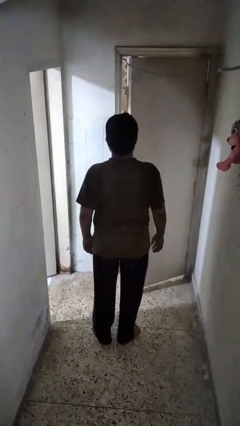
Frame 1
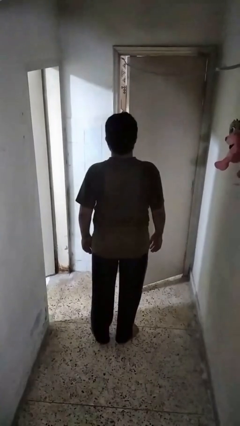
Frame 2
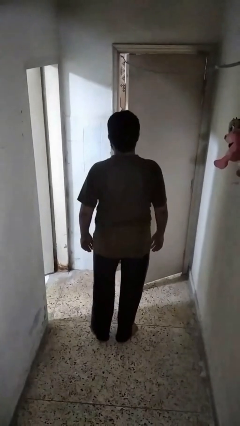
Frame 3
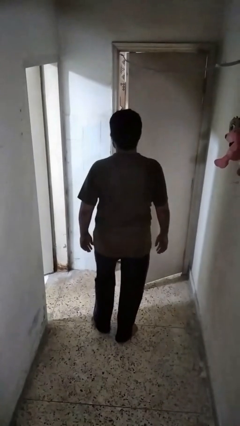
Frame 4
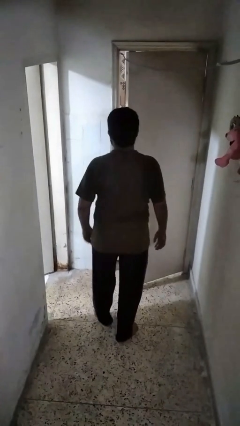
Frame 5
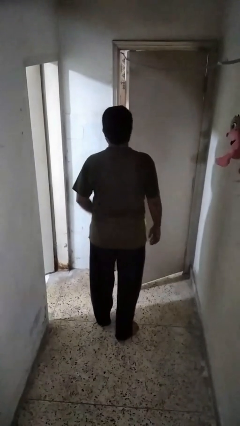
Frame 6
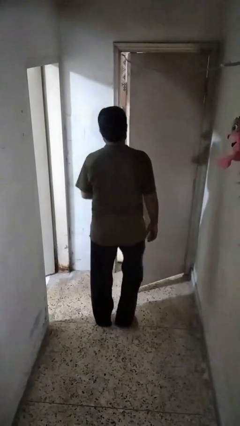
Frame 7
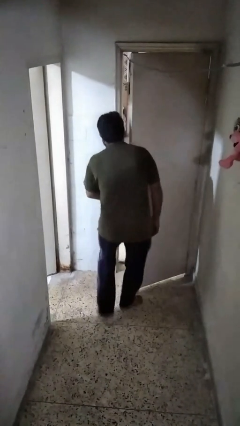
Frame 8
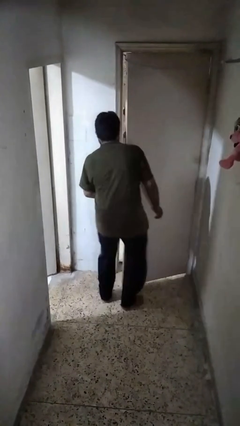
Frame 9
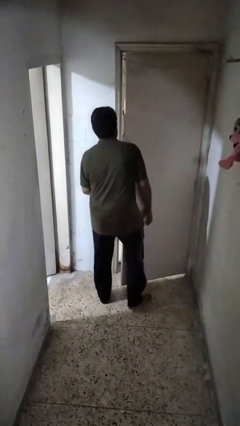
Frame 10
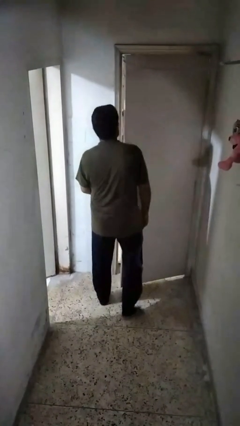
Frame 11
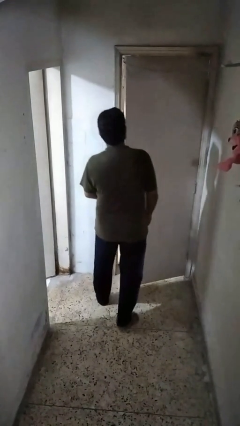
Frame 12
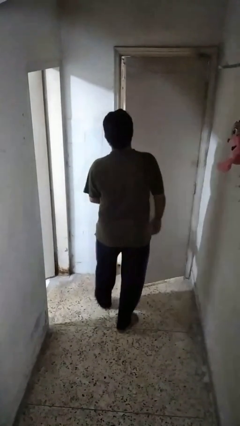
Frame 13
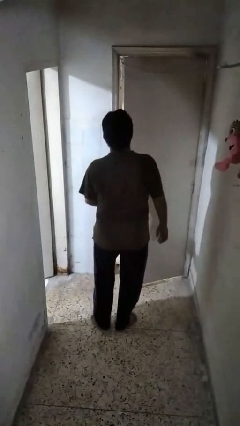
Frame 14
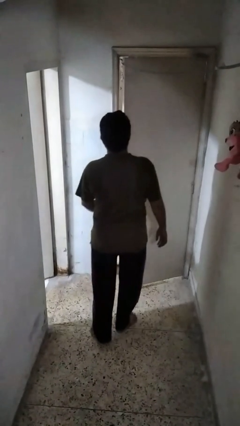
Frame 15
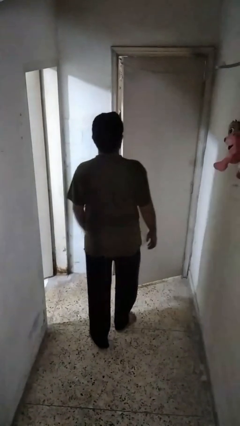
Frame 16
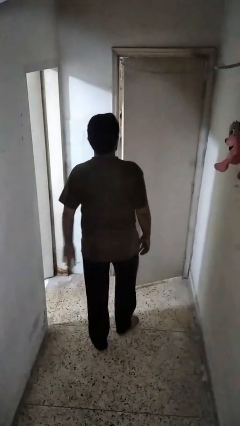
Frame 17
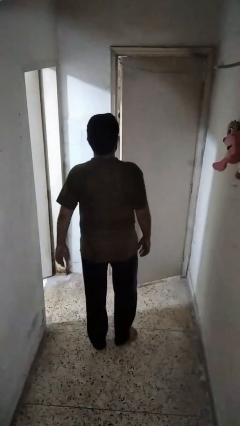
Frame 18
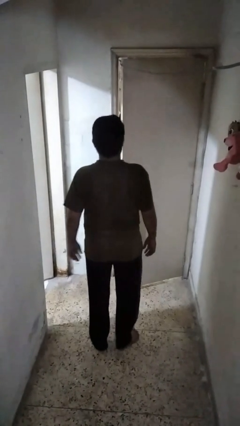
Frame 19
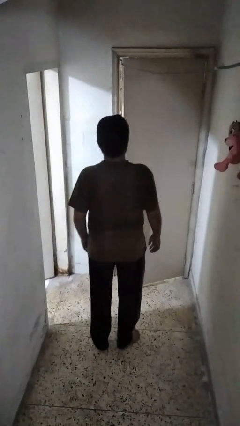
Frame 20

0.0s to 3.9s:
person bumps into wall

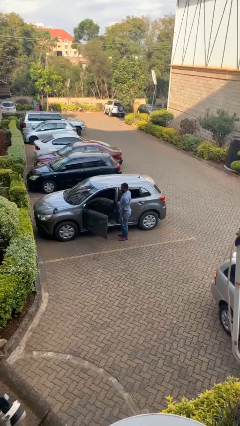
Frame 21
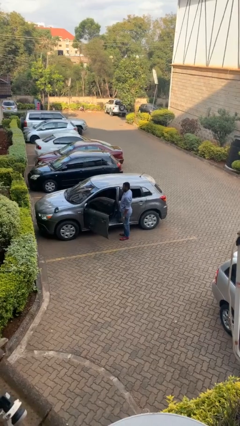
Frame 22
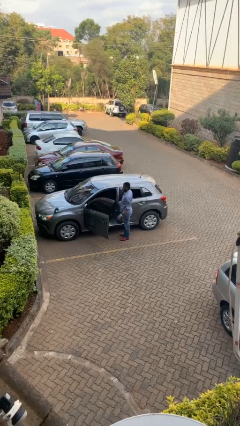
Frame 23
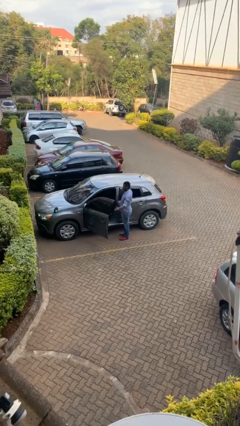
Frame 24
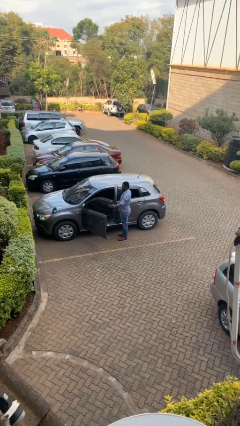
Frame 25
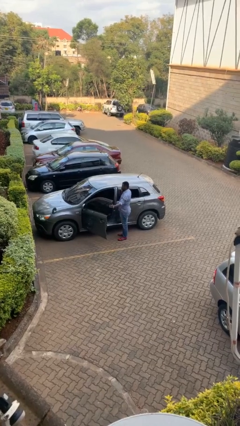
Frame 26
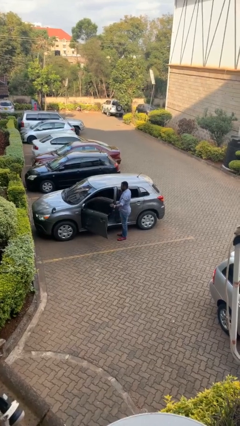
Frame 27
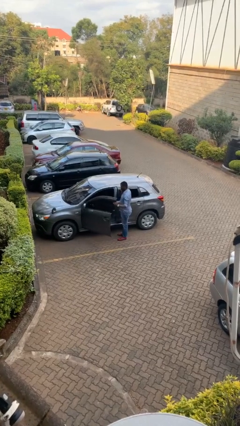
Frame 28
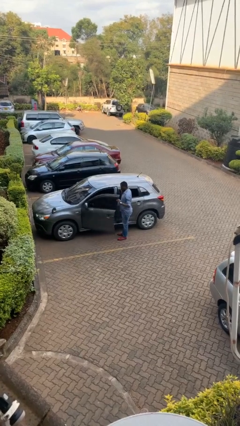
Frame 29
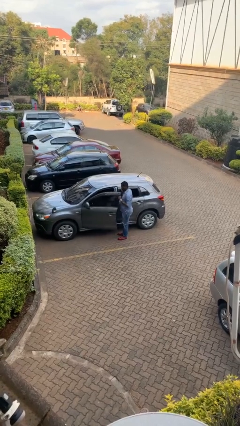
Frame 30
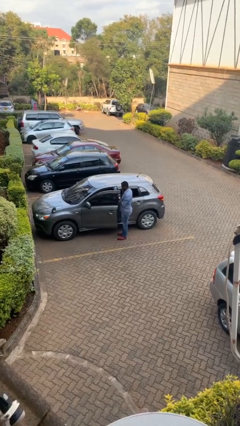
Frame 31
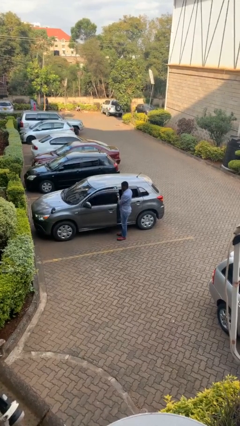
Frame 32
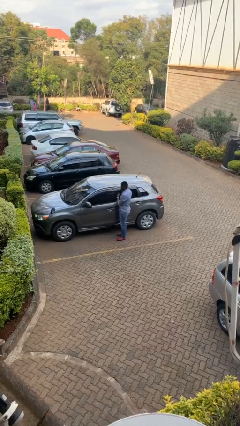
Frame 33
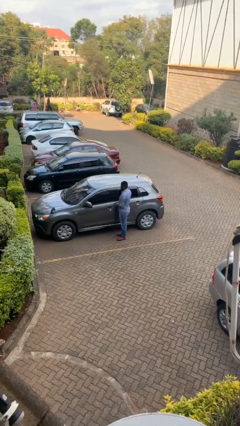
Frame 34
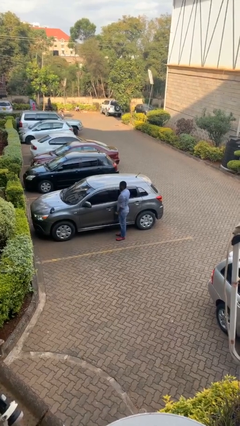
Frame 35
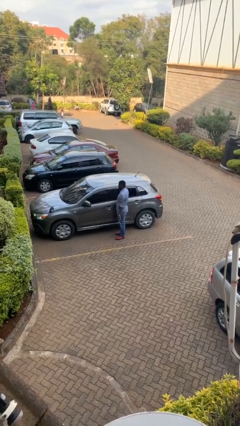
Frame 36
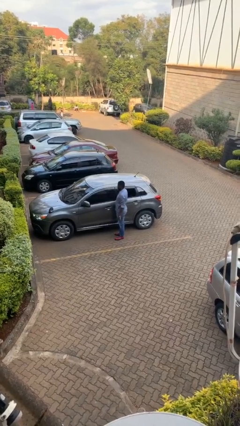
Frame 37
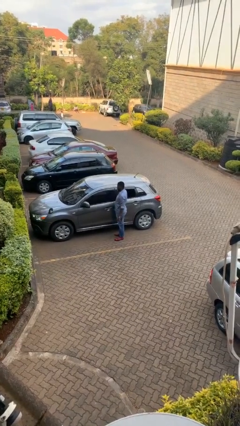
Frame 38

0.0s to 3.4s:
person closes car door

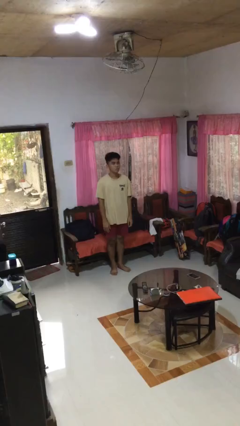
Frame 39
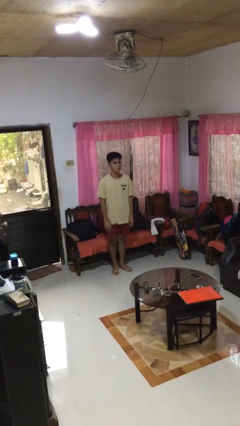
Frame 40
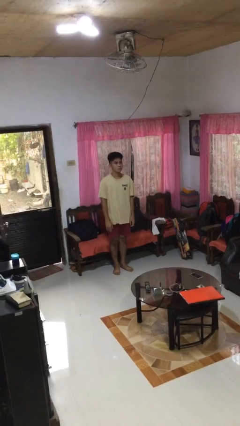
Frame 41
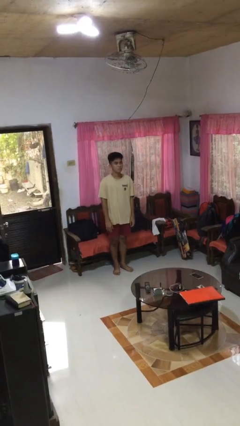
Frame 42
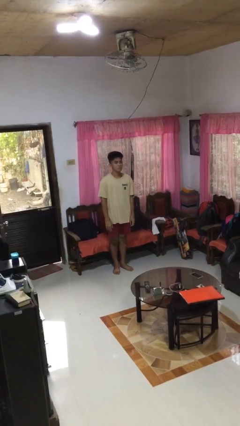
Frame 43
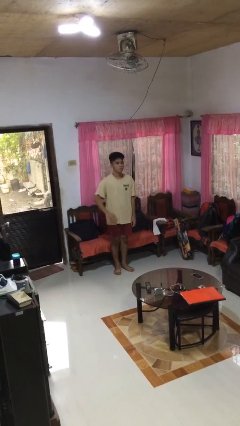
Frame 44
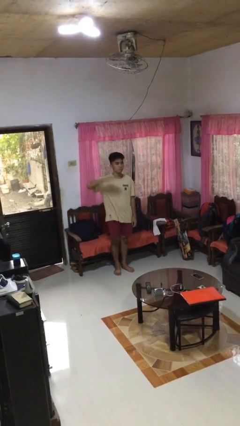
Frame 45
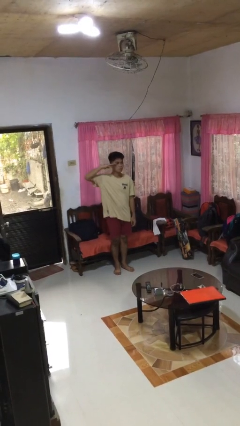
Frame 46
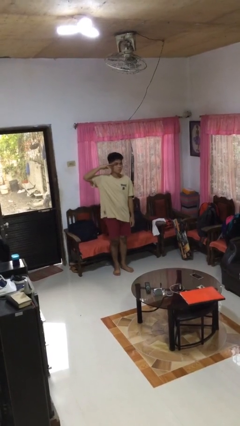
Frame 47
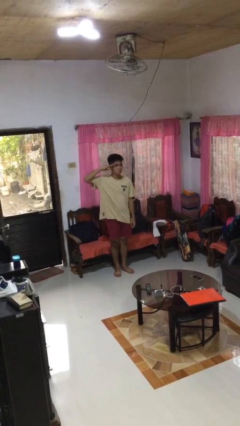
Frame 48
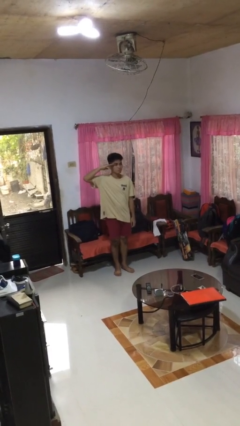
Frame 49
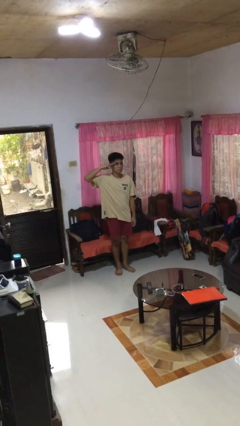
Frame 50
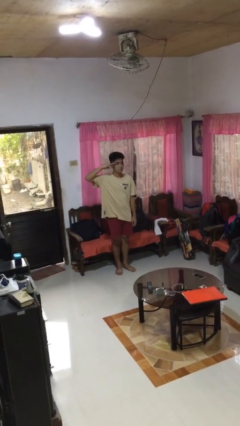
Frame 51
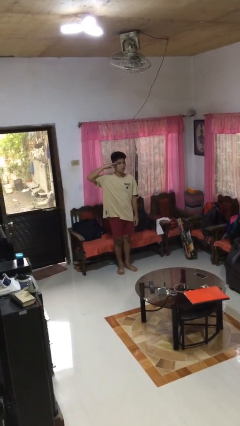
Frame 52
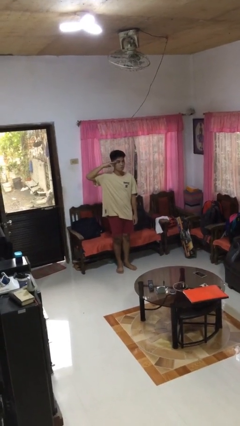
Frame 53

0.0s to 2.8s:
person salutes

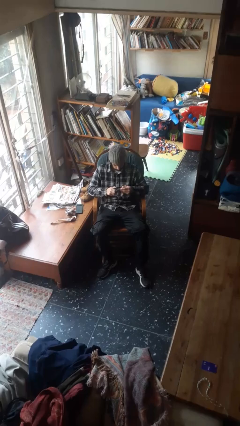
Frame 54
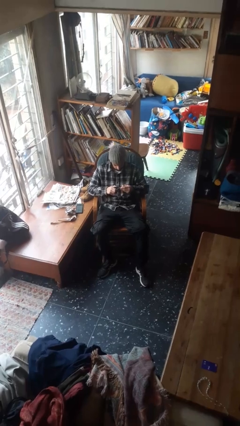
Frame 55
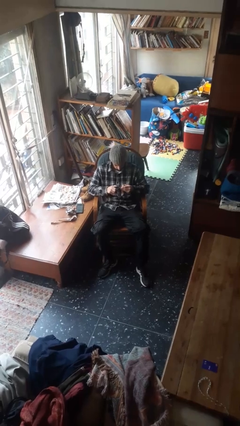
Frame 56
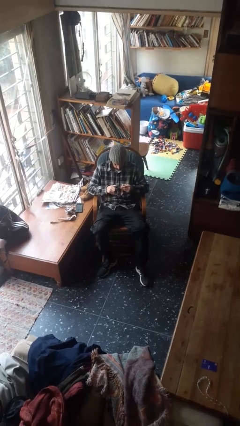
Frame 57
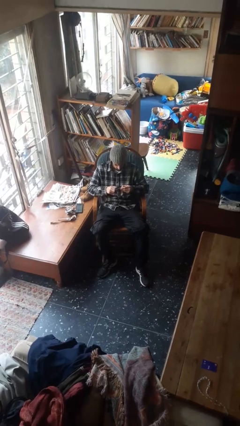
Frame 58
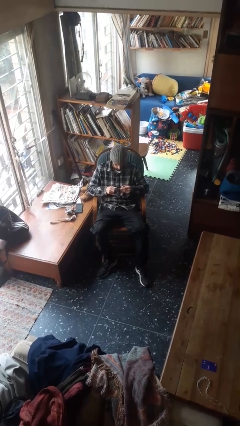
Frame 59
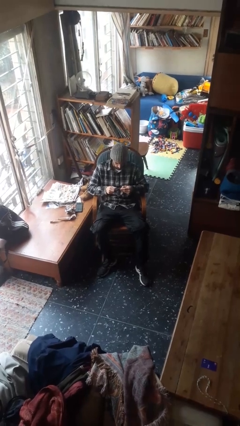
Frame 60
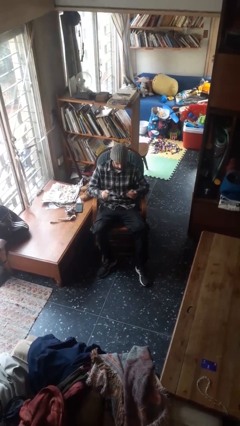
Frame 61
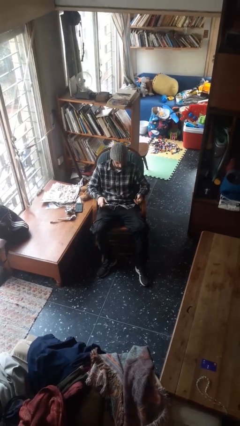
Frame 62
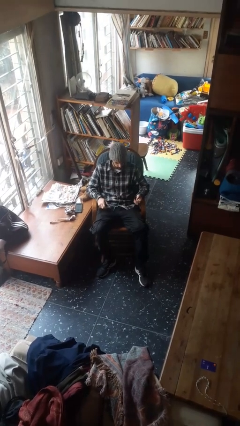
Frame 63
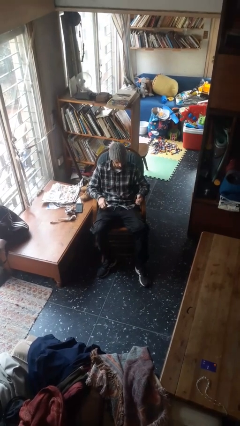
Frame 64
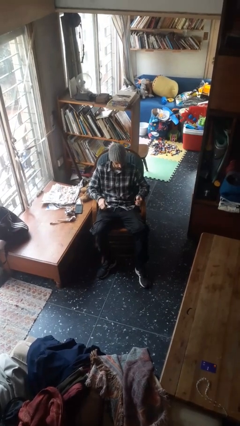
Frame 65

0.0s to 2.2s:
person clips fingernails

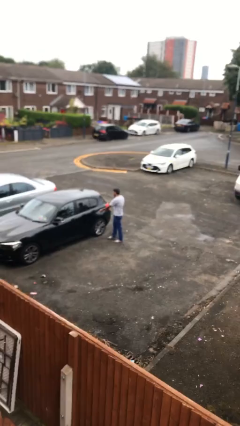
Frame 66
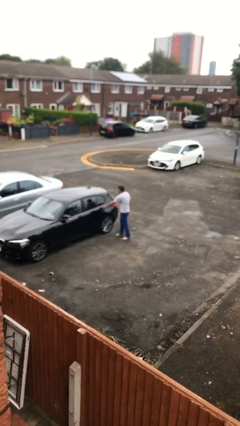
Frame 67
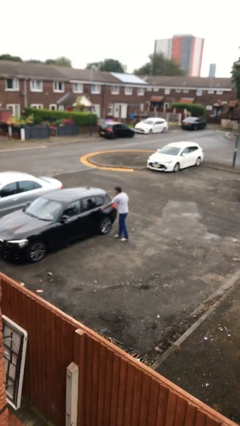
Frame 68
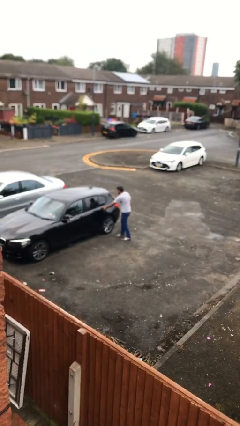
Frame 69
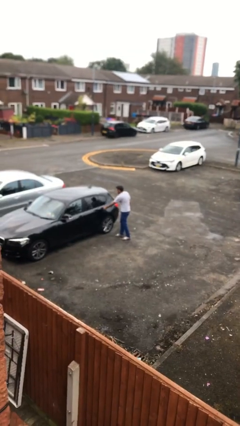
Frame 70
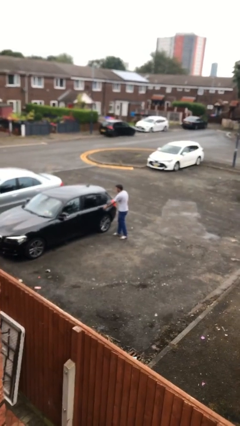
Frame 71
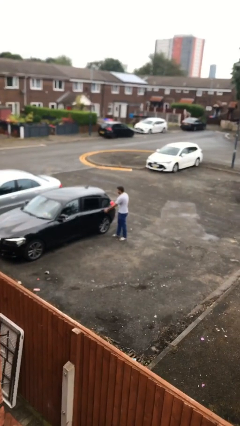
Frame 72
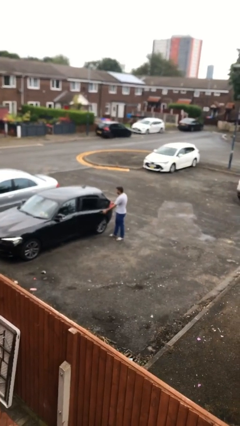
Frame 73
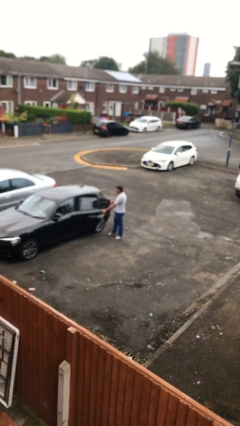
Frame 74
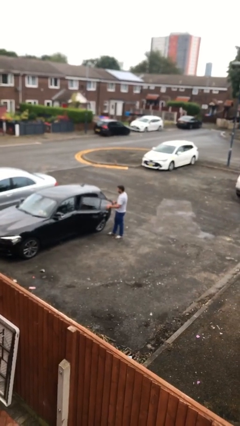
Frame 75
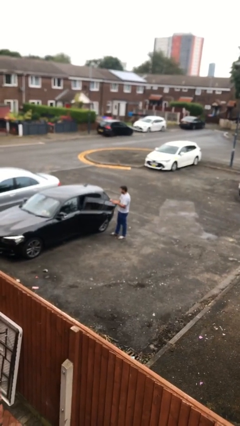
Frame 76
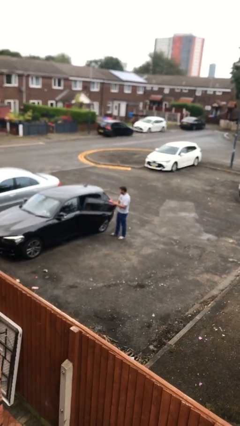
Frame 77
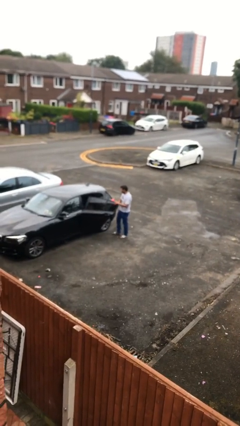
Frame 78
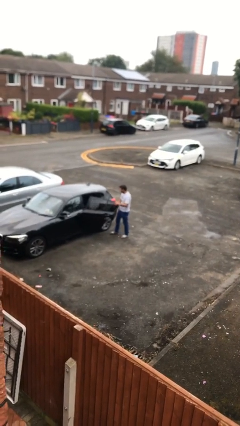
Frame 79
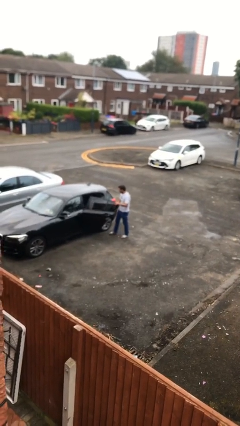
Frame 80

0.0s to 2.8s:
person opens car door

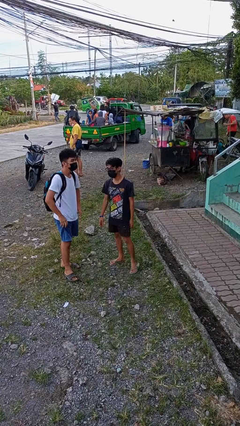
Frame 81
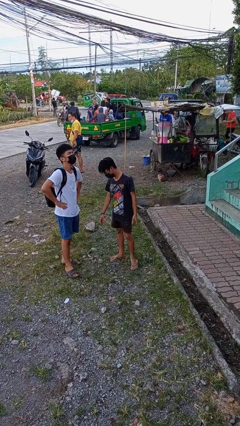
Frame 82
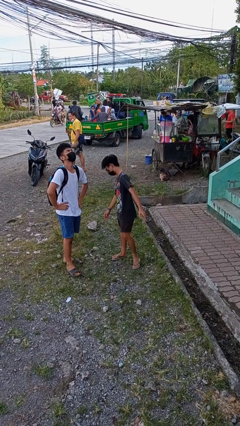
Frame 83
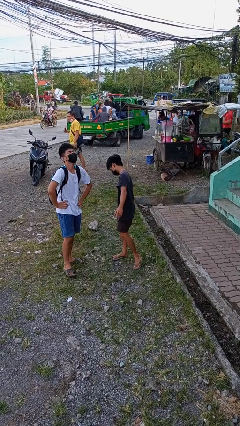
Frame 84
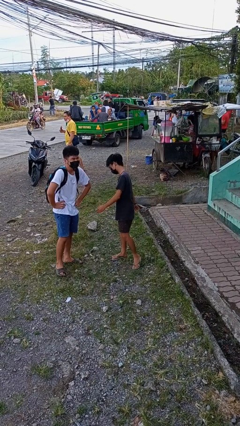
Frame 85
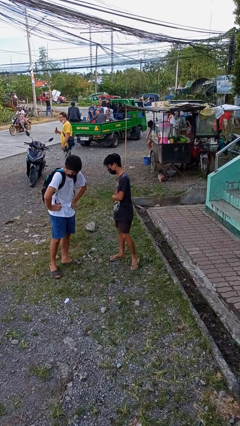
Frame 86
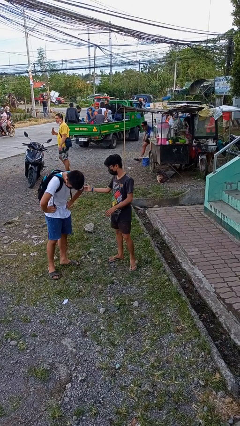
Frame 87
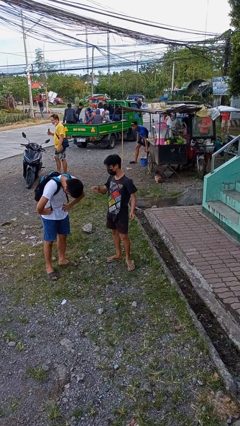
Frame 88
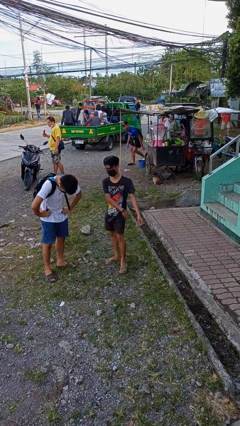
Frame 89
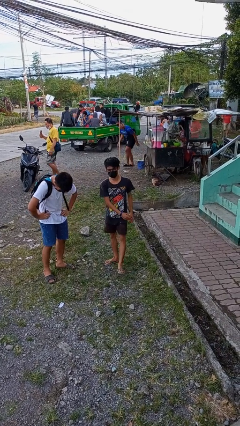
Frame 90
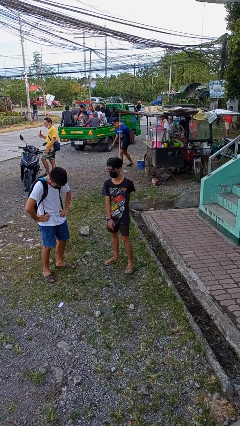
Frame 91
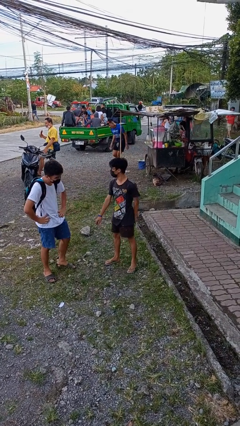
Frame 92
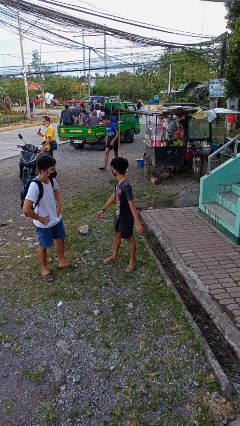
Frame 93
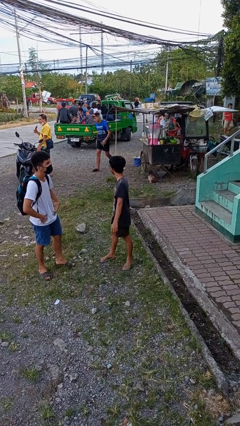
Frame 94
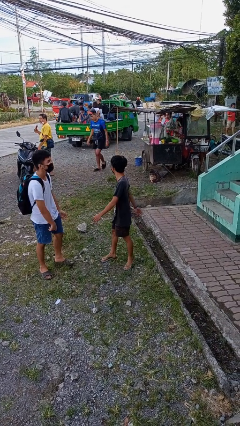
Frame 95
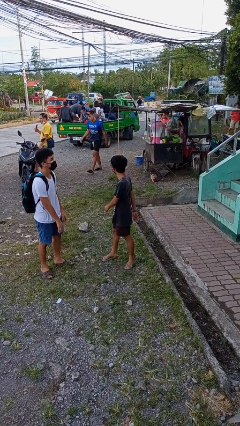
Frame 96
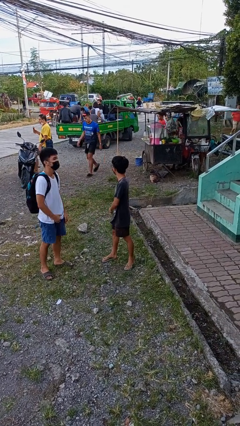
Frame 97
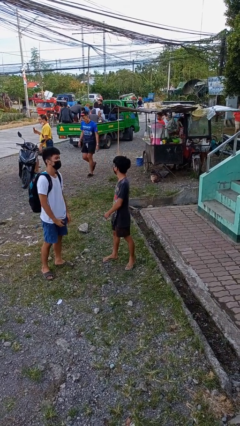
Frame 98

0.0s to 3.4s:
person laughs with person
